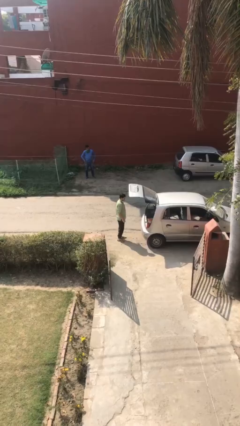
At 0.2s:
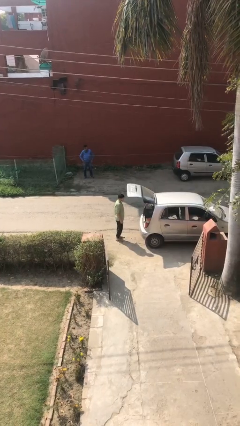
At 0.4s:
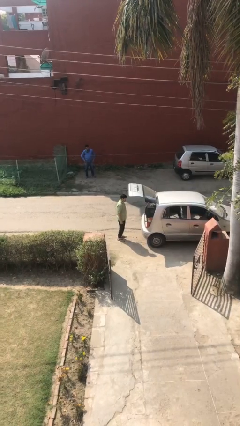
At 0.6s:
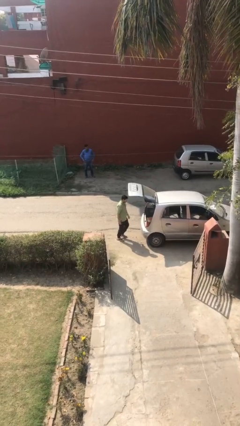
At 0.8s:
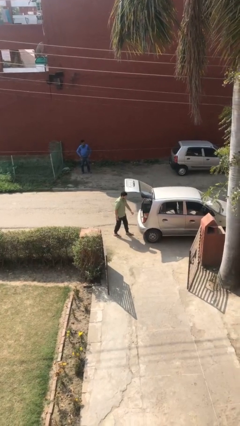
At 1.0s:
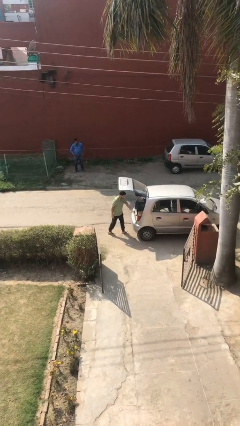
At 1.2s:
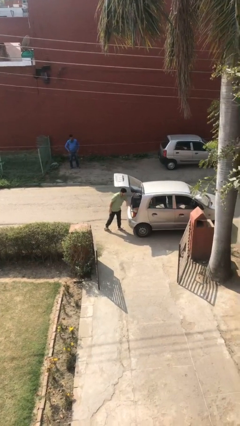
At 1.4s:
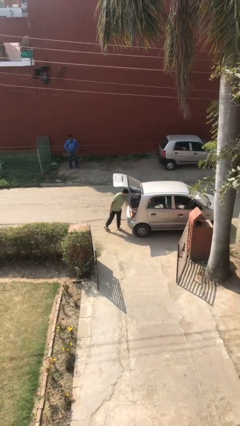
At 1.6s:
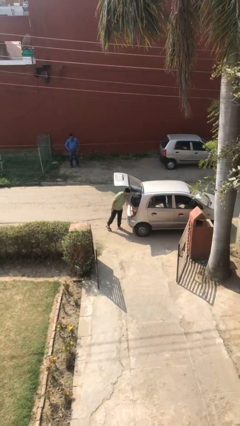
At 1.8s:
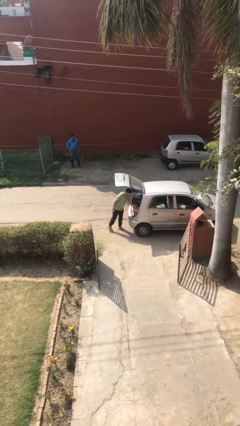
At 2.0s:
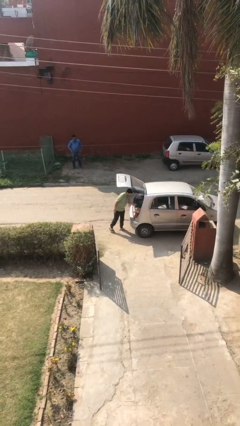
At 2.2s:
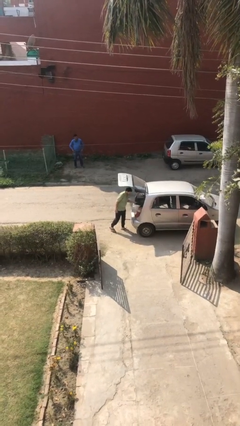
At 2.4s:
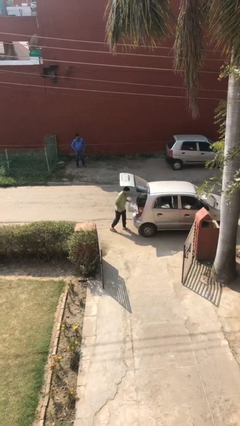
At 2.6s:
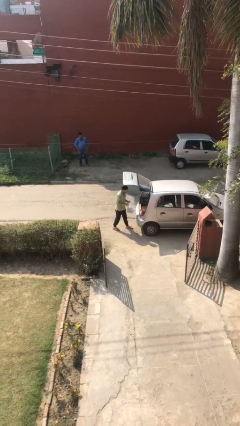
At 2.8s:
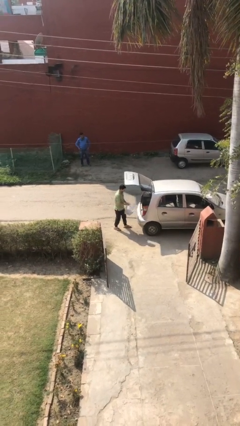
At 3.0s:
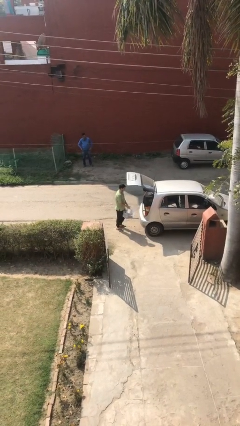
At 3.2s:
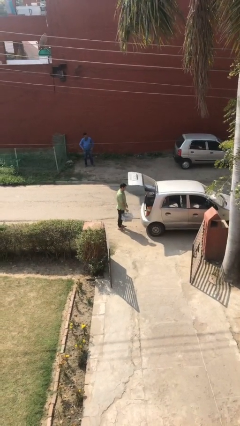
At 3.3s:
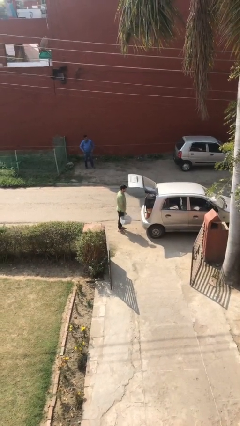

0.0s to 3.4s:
person unloads car

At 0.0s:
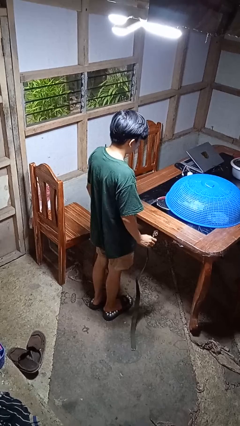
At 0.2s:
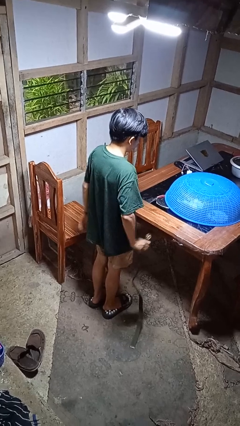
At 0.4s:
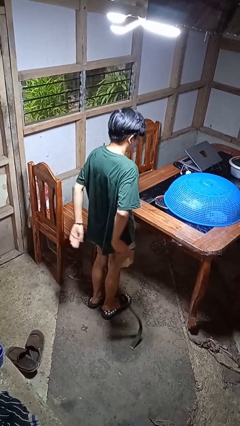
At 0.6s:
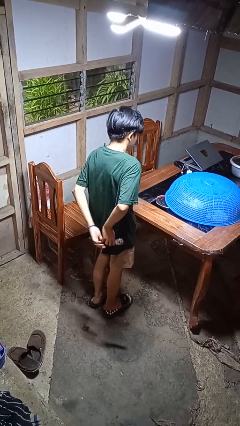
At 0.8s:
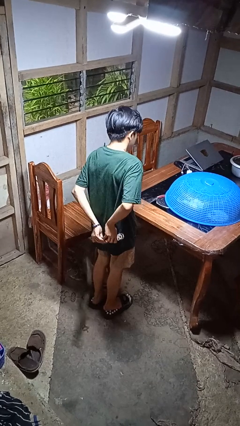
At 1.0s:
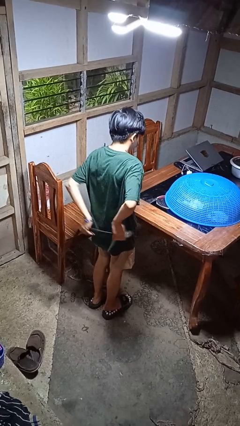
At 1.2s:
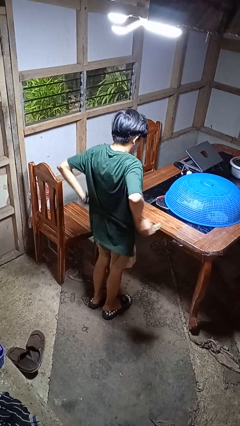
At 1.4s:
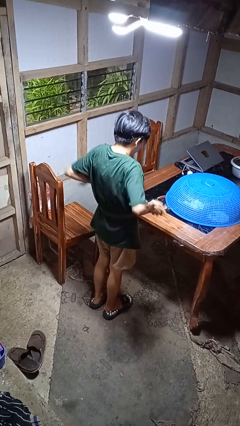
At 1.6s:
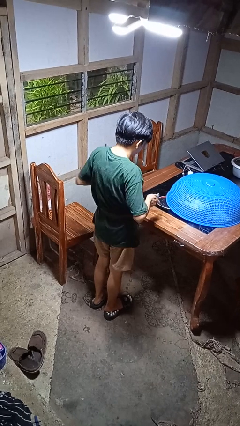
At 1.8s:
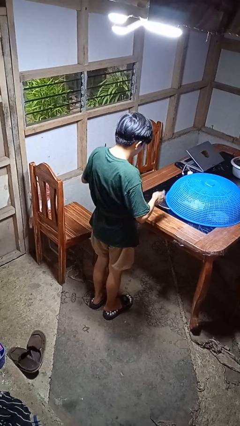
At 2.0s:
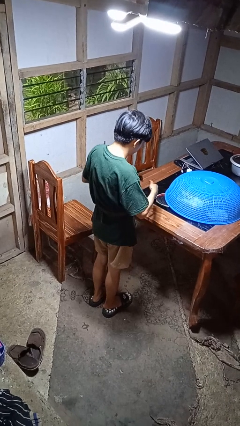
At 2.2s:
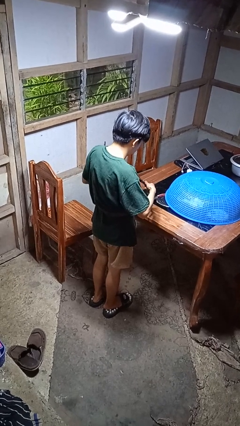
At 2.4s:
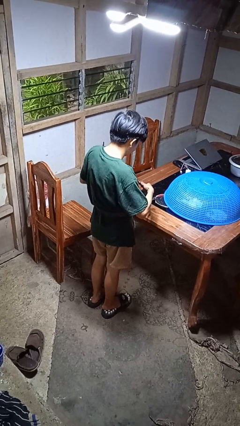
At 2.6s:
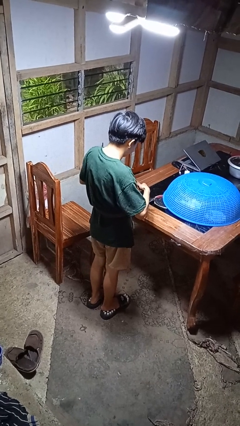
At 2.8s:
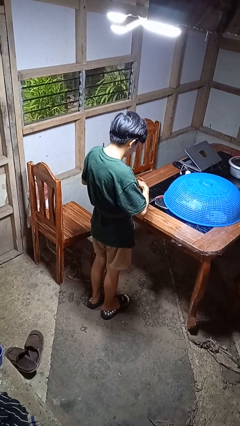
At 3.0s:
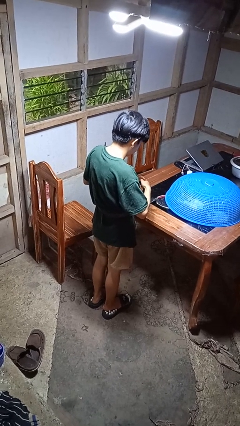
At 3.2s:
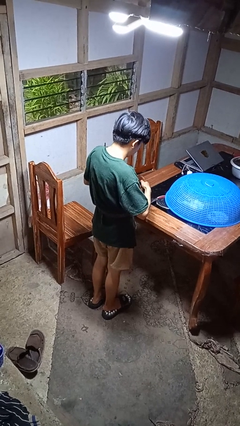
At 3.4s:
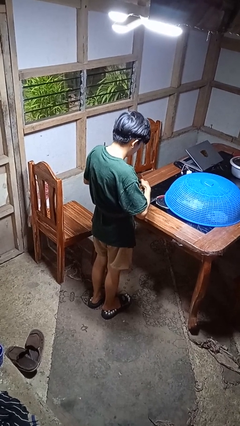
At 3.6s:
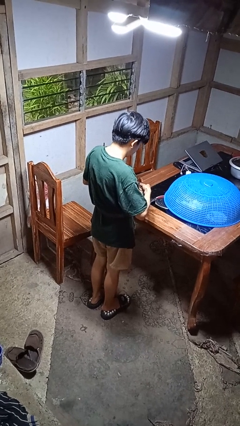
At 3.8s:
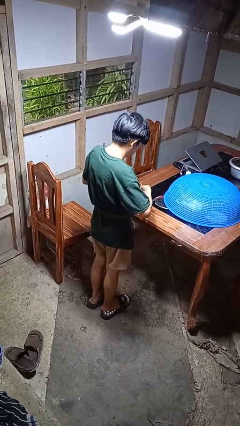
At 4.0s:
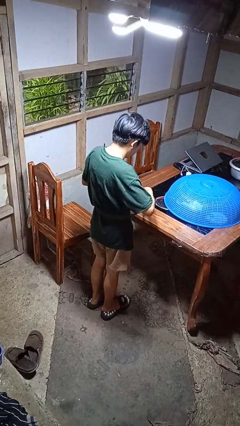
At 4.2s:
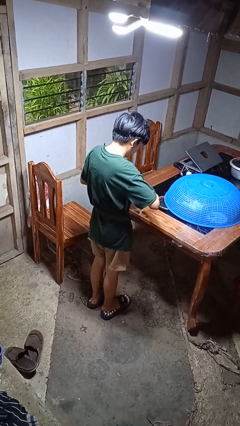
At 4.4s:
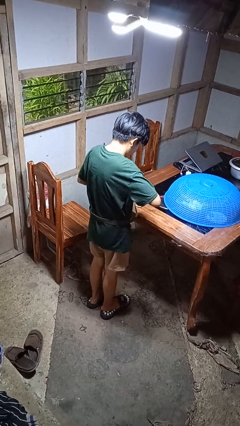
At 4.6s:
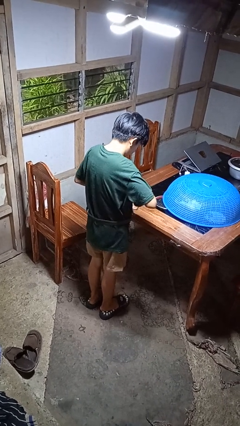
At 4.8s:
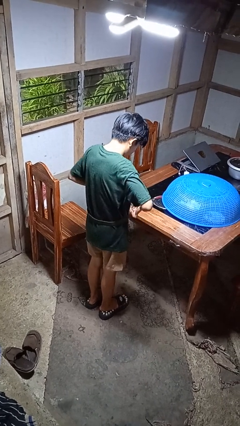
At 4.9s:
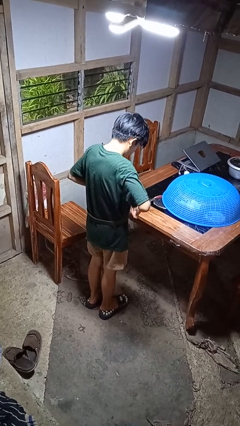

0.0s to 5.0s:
person puts on belt

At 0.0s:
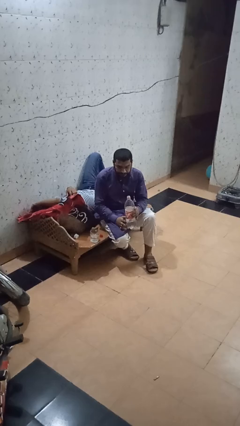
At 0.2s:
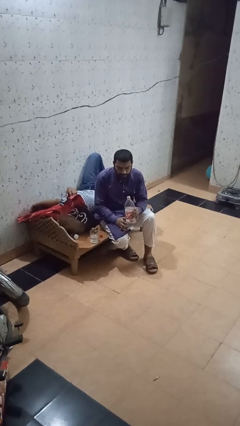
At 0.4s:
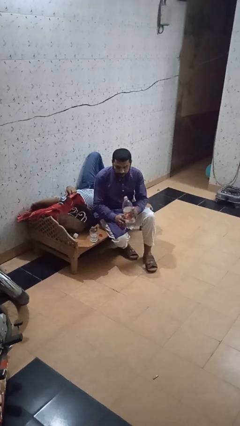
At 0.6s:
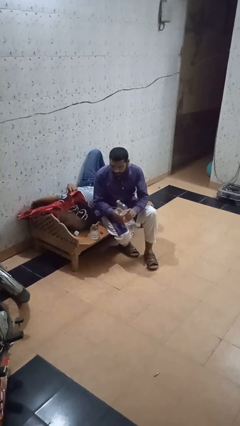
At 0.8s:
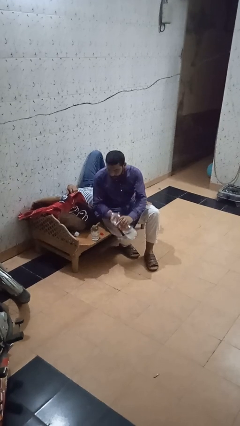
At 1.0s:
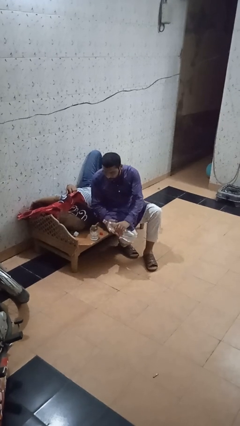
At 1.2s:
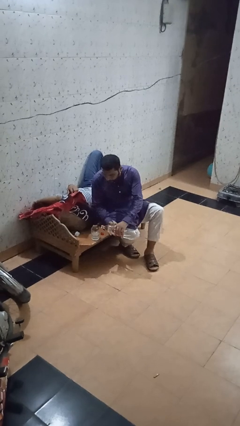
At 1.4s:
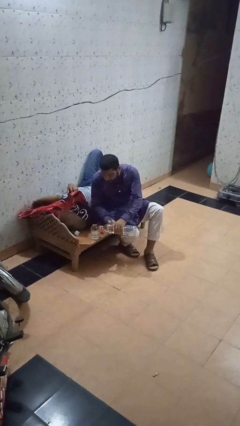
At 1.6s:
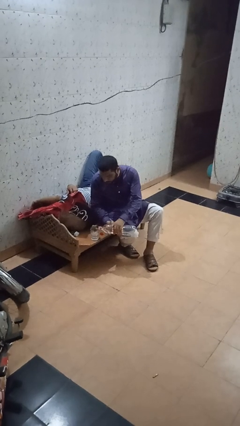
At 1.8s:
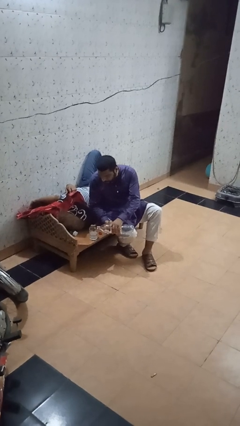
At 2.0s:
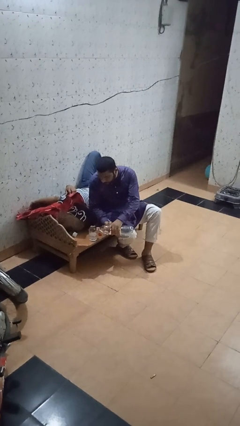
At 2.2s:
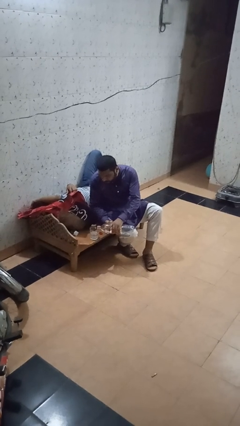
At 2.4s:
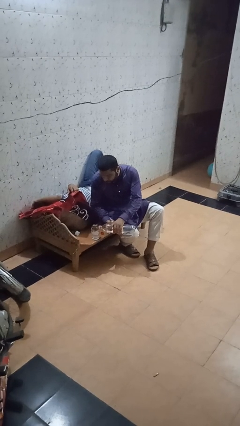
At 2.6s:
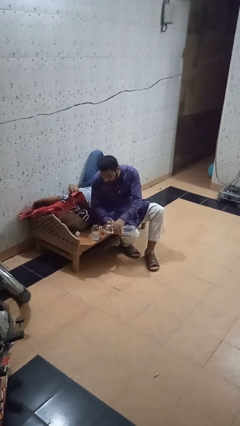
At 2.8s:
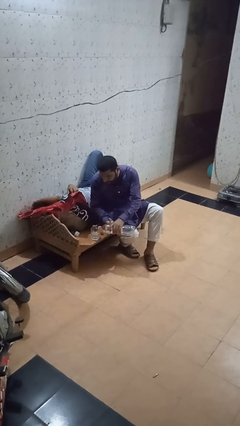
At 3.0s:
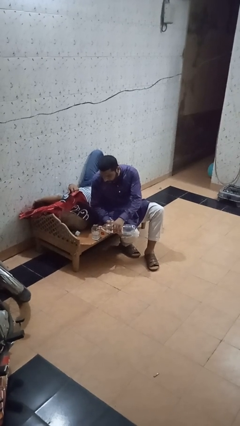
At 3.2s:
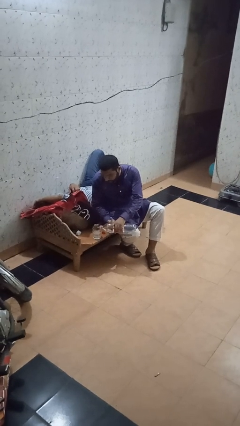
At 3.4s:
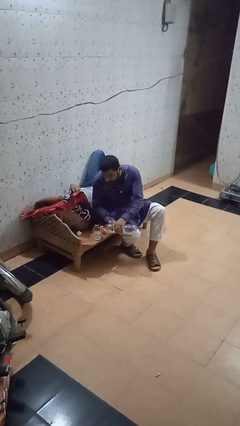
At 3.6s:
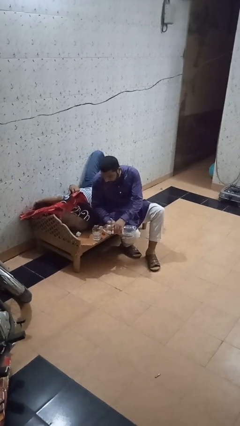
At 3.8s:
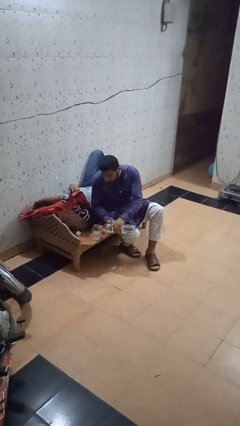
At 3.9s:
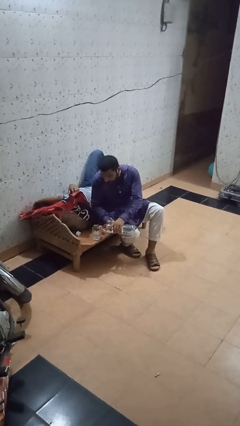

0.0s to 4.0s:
person pours liquid into cup

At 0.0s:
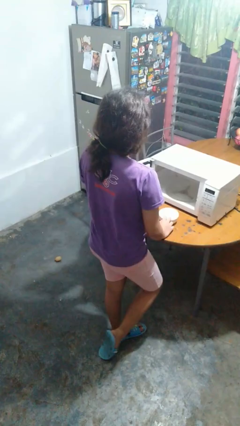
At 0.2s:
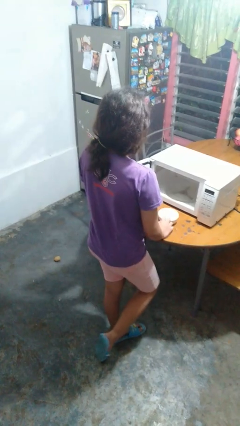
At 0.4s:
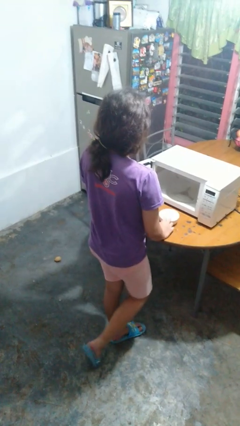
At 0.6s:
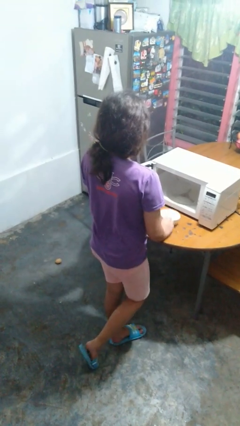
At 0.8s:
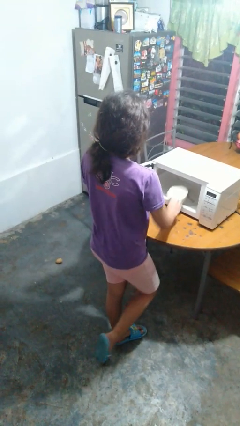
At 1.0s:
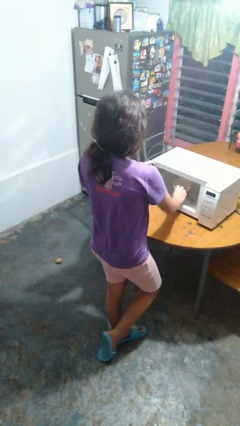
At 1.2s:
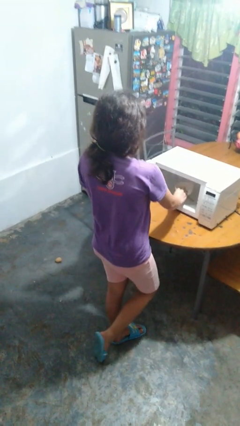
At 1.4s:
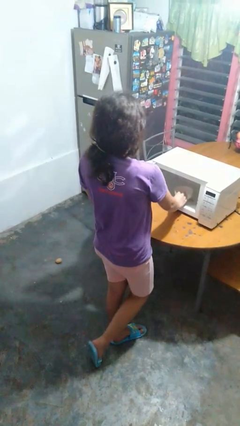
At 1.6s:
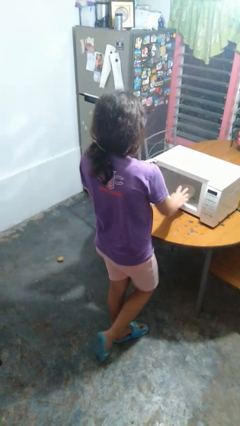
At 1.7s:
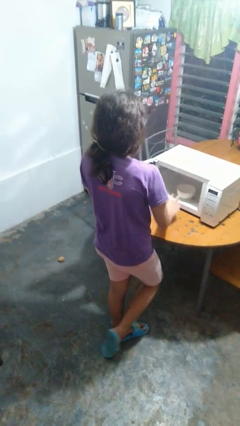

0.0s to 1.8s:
person puts object into microwave

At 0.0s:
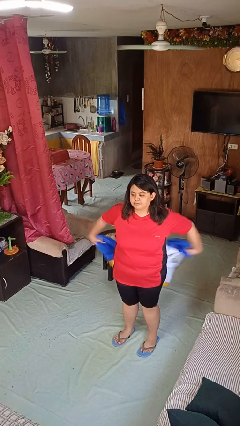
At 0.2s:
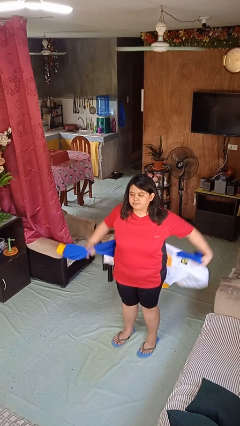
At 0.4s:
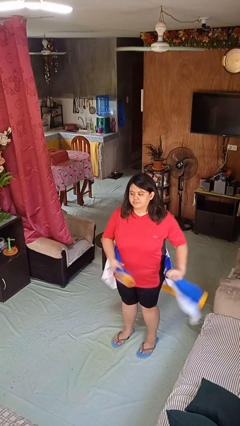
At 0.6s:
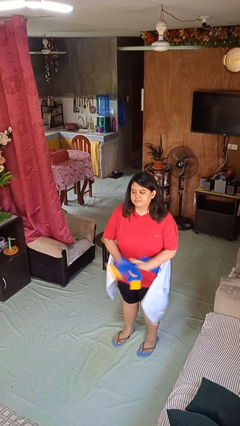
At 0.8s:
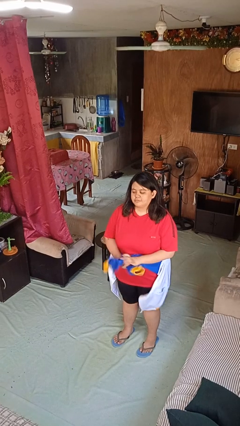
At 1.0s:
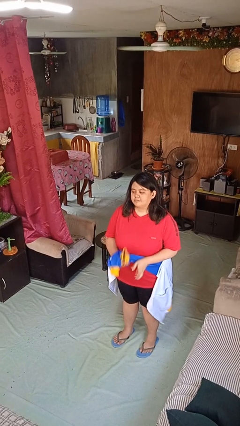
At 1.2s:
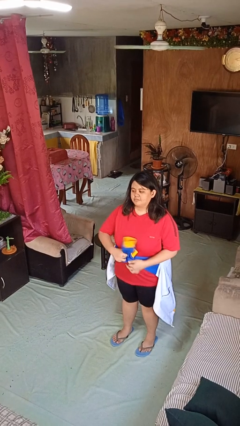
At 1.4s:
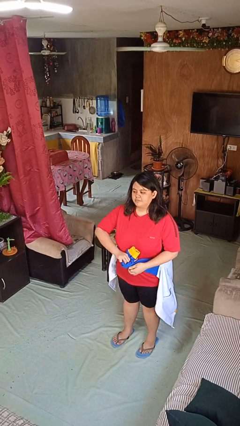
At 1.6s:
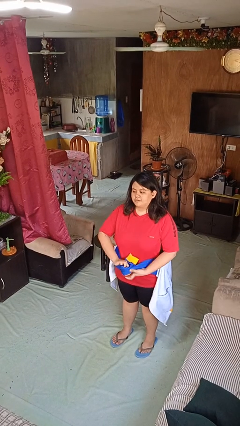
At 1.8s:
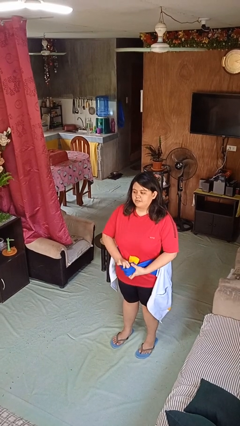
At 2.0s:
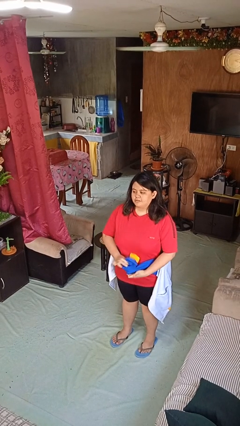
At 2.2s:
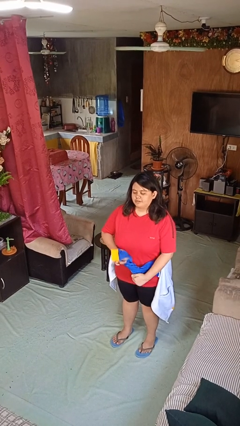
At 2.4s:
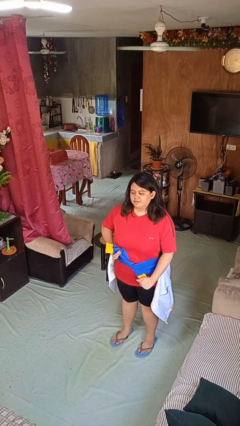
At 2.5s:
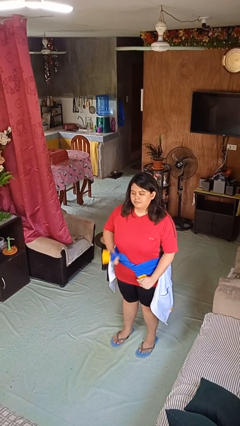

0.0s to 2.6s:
person ties jacket around waist

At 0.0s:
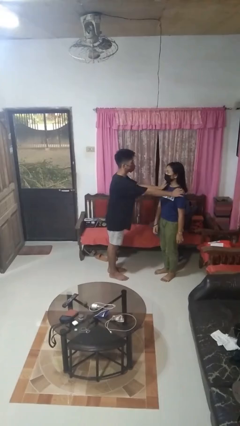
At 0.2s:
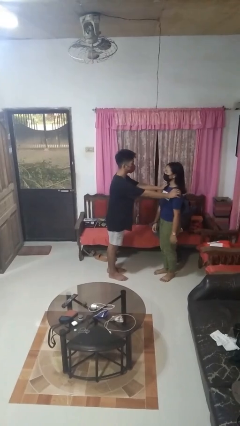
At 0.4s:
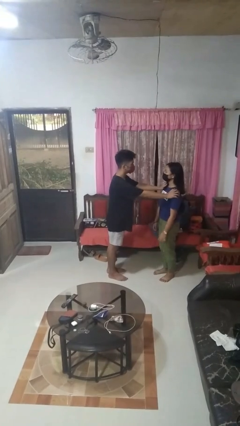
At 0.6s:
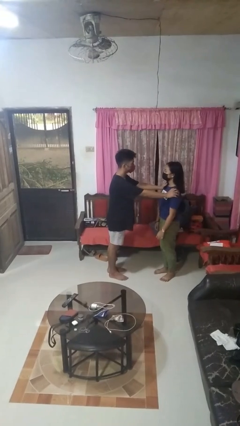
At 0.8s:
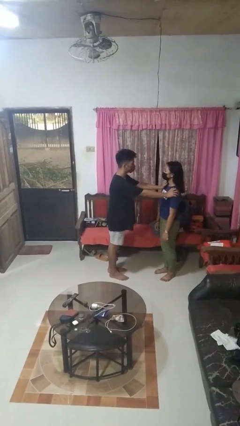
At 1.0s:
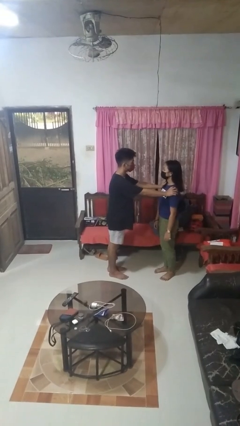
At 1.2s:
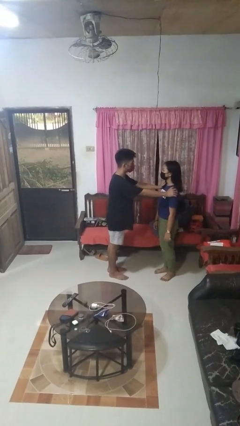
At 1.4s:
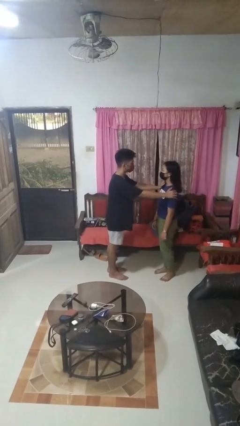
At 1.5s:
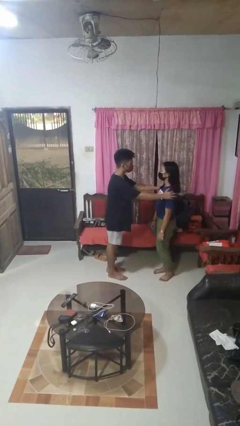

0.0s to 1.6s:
person grabs person by shoulder
